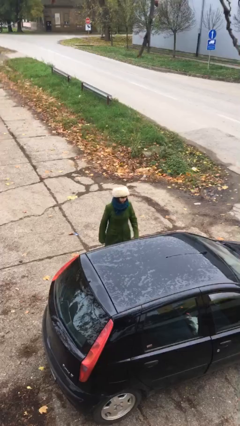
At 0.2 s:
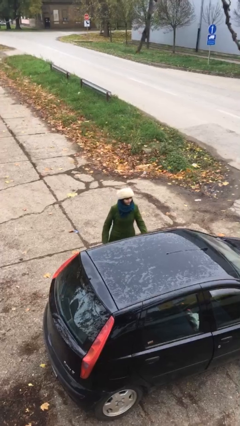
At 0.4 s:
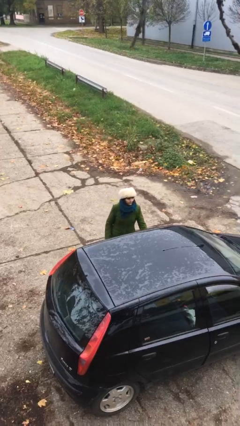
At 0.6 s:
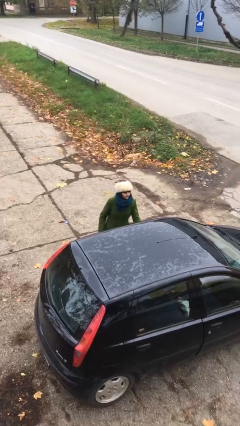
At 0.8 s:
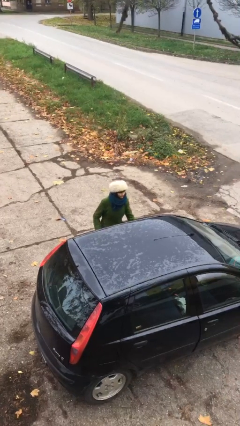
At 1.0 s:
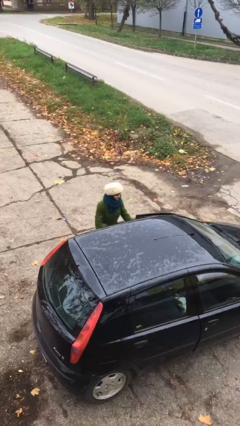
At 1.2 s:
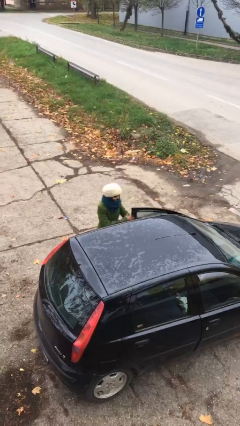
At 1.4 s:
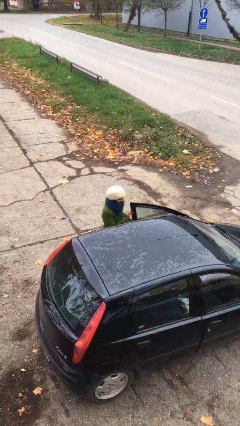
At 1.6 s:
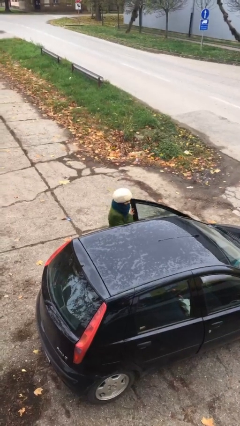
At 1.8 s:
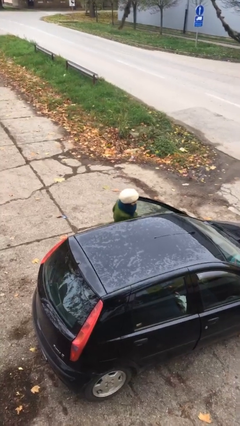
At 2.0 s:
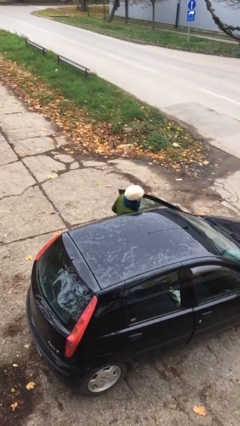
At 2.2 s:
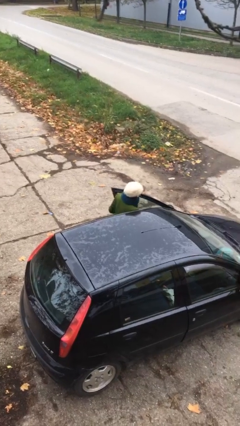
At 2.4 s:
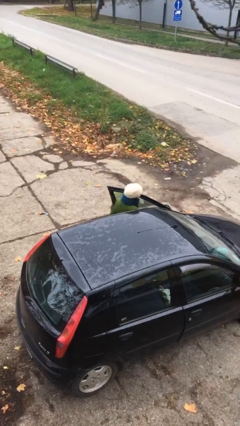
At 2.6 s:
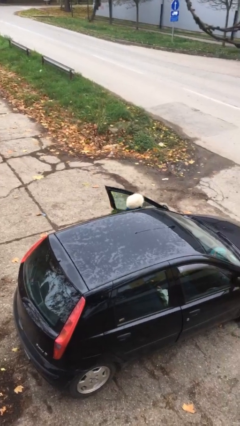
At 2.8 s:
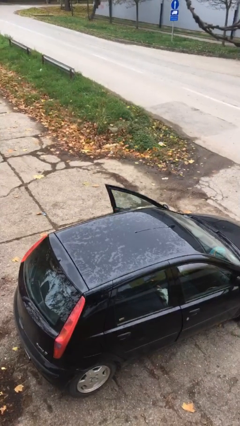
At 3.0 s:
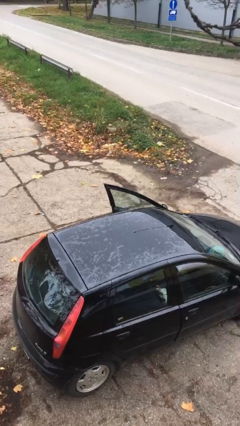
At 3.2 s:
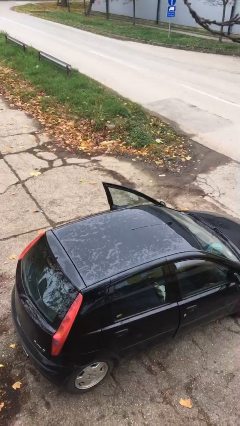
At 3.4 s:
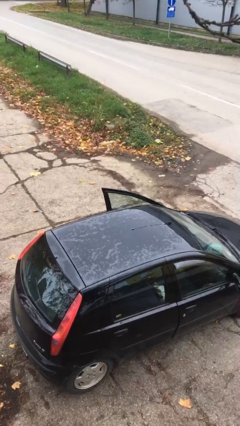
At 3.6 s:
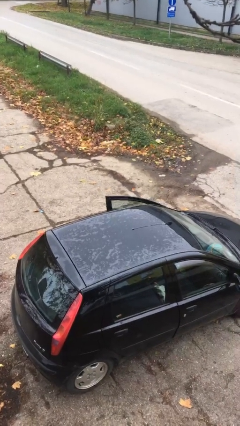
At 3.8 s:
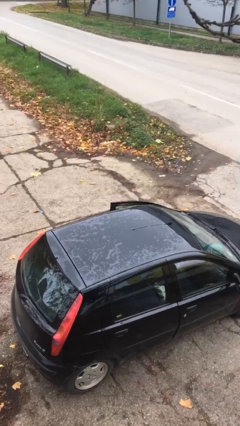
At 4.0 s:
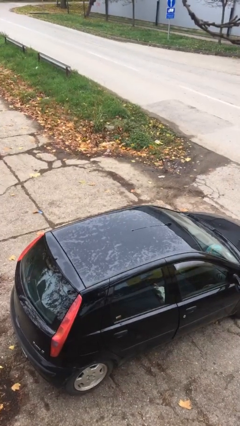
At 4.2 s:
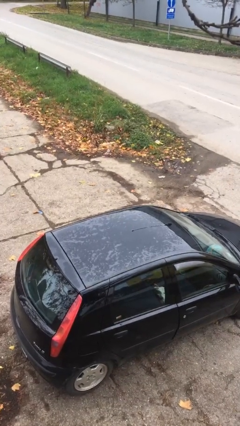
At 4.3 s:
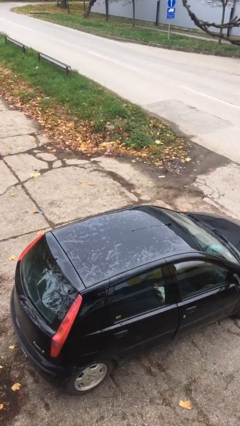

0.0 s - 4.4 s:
person enters car

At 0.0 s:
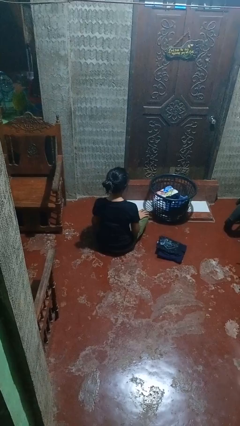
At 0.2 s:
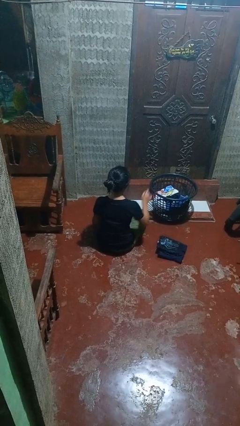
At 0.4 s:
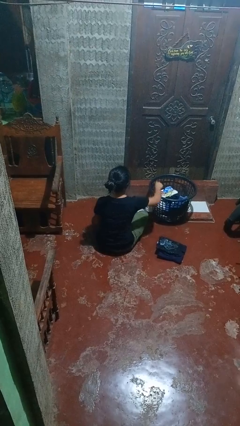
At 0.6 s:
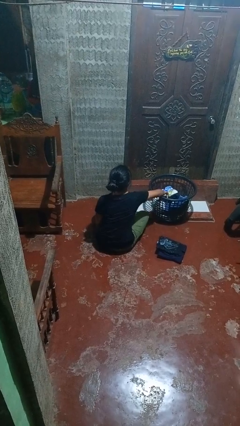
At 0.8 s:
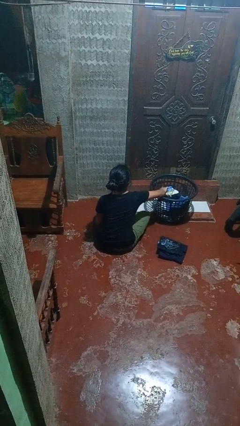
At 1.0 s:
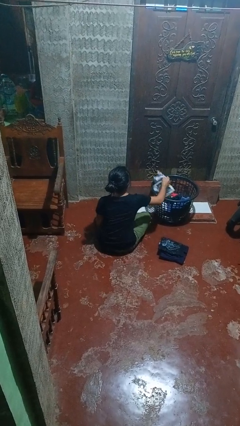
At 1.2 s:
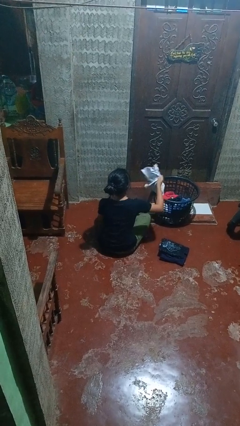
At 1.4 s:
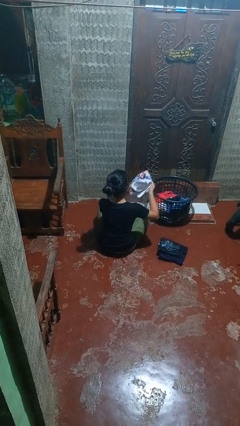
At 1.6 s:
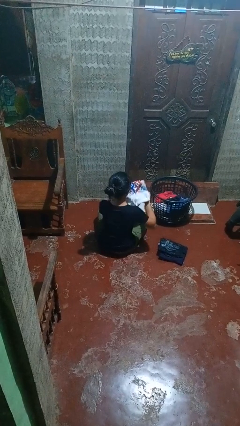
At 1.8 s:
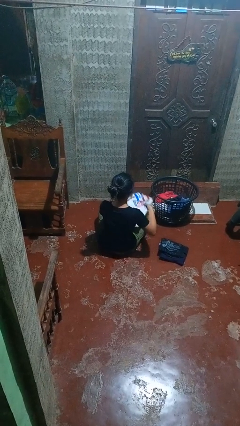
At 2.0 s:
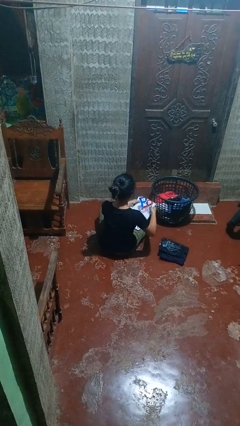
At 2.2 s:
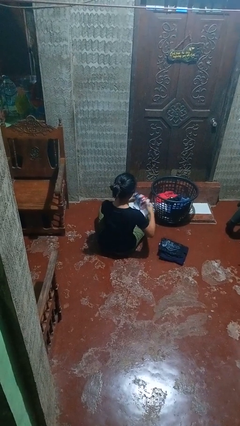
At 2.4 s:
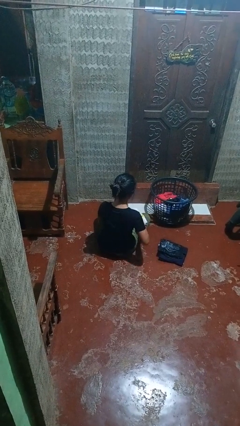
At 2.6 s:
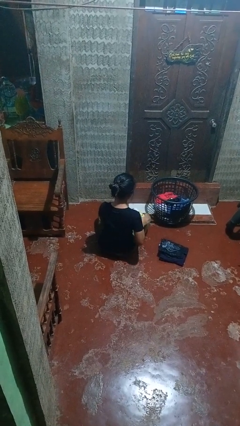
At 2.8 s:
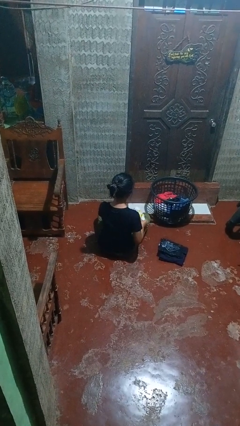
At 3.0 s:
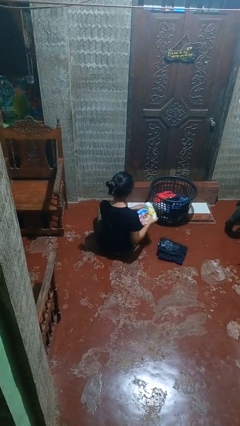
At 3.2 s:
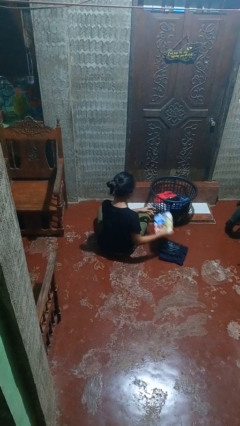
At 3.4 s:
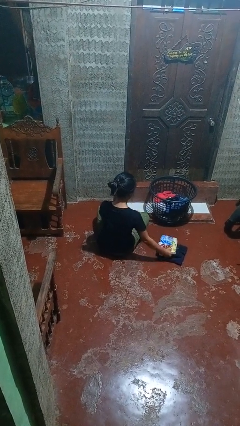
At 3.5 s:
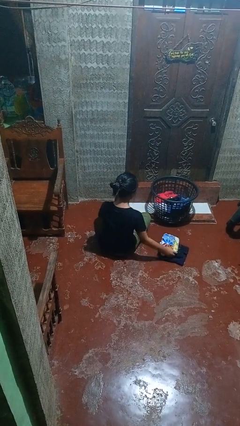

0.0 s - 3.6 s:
person folds shirt

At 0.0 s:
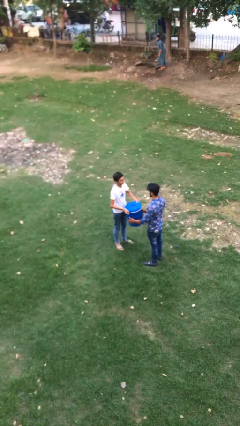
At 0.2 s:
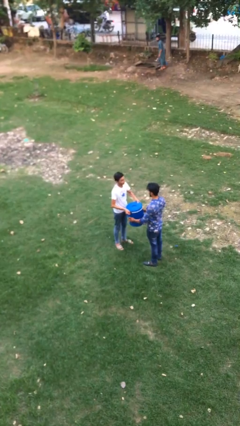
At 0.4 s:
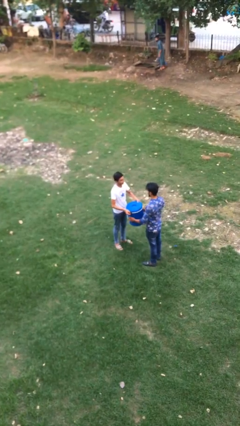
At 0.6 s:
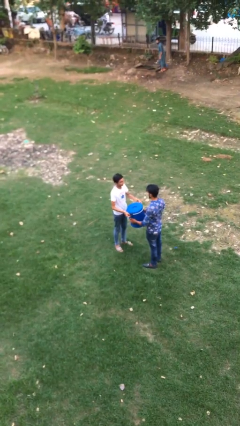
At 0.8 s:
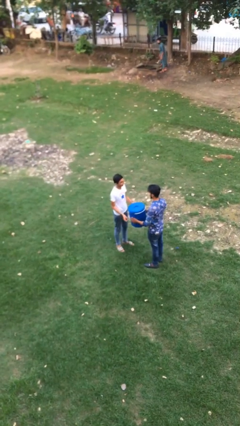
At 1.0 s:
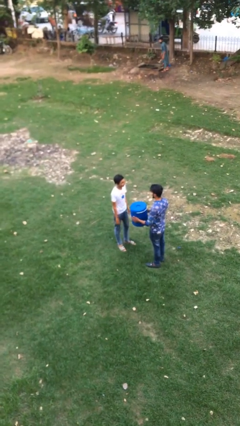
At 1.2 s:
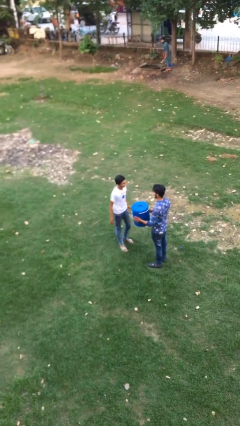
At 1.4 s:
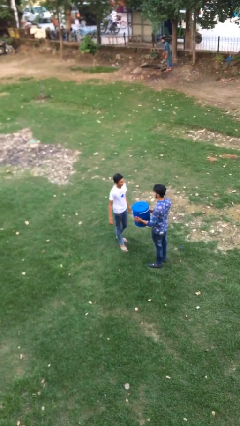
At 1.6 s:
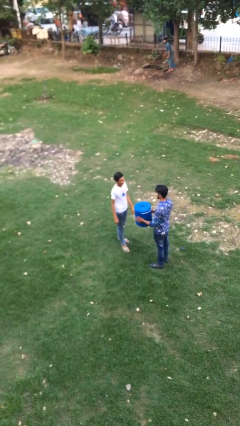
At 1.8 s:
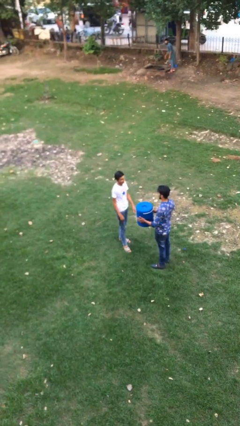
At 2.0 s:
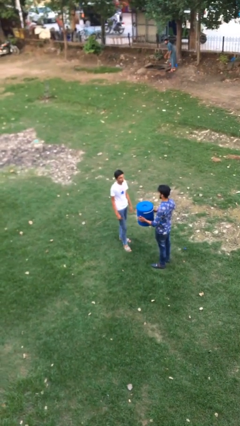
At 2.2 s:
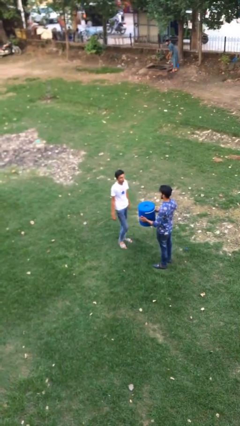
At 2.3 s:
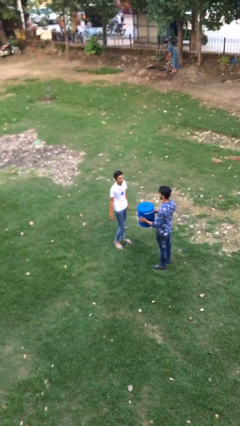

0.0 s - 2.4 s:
person transfers object to person

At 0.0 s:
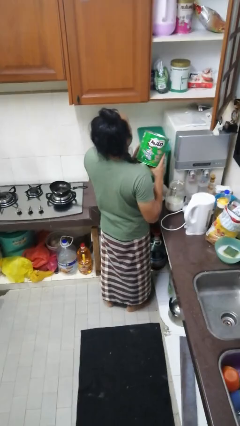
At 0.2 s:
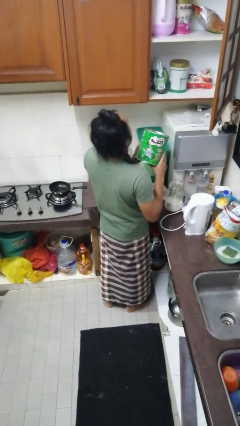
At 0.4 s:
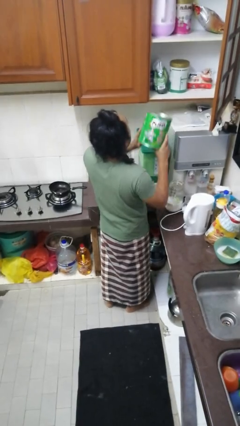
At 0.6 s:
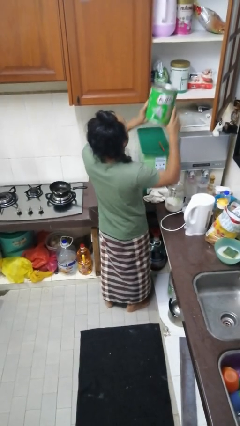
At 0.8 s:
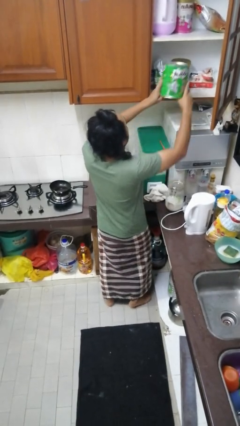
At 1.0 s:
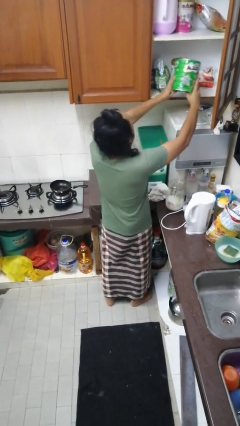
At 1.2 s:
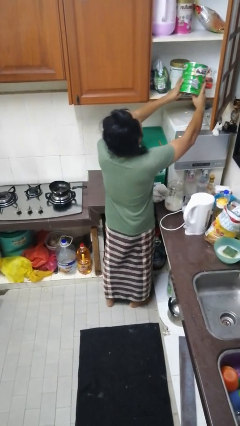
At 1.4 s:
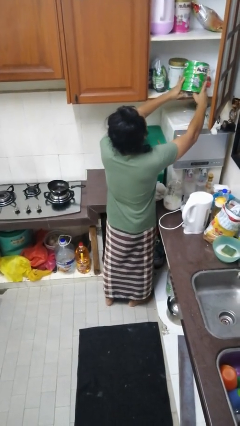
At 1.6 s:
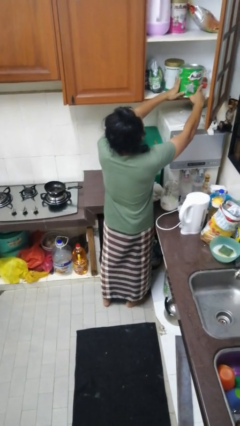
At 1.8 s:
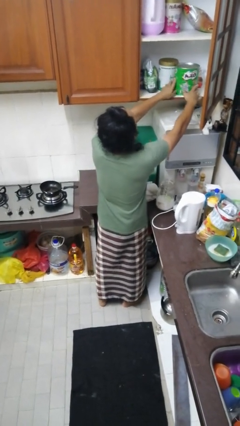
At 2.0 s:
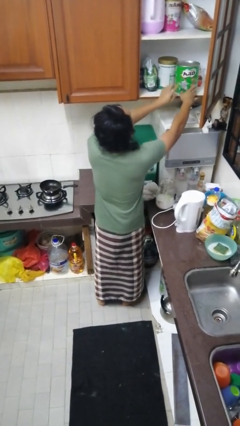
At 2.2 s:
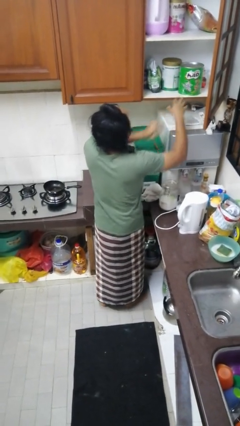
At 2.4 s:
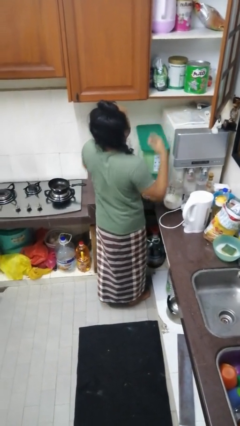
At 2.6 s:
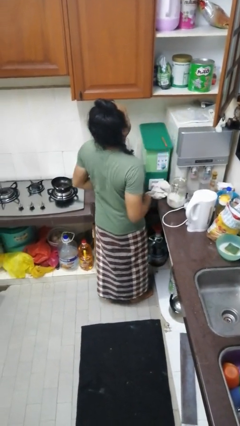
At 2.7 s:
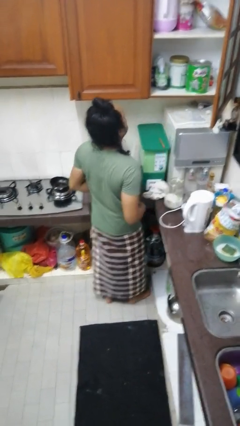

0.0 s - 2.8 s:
person puts object in cabinet

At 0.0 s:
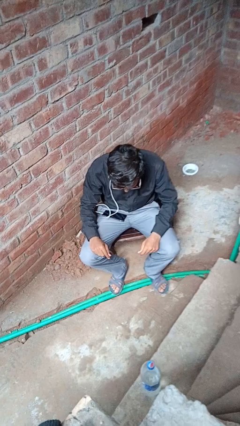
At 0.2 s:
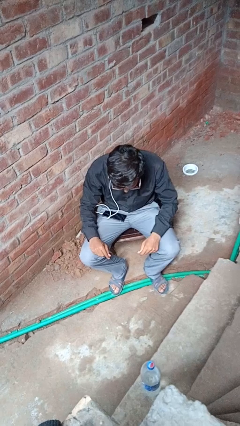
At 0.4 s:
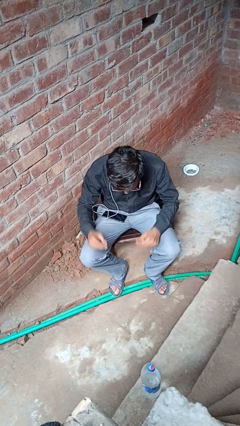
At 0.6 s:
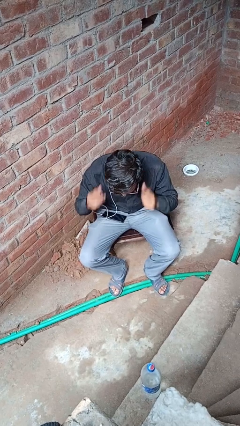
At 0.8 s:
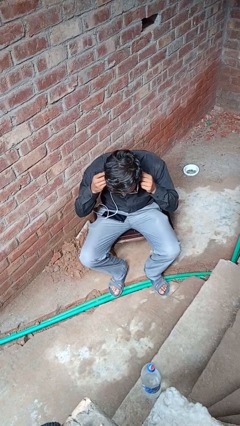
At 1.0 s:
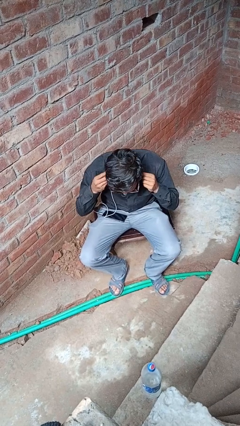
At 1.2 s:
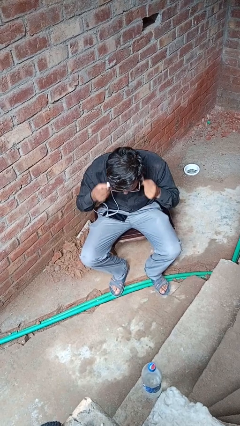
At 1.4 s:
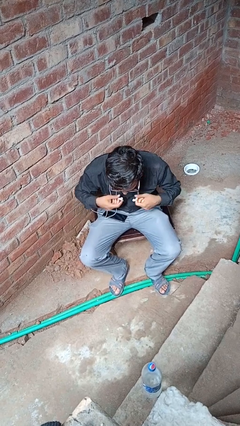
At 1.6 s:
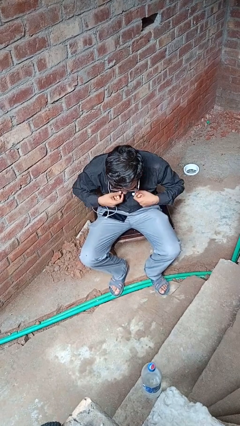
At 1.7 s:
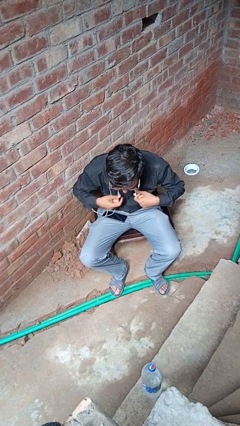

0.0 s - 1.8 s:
person takes off headphones

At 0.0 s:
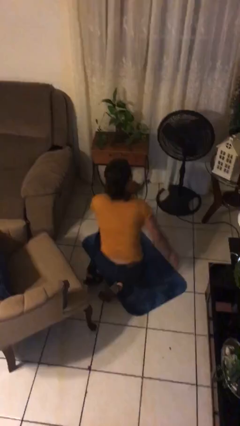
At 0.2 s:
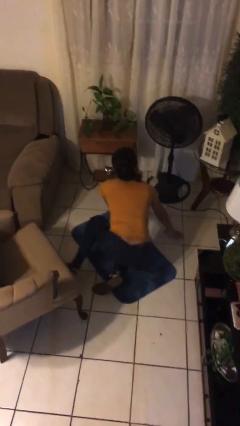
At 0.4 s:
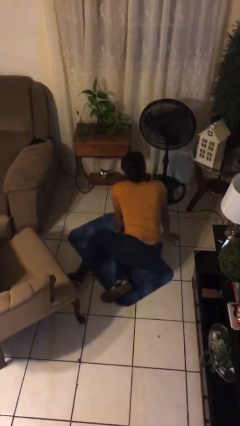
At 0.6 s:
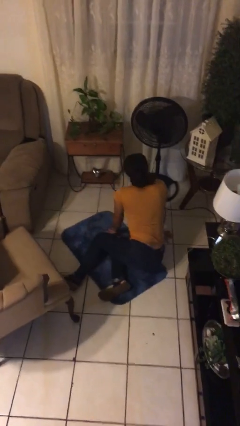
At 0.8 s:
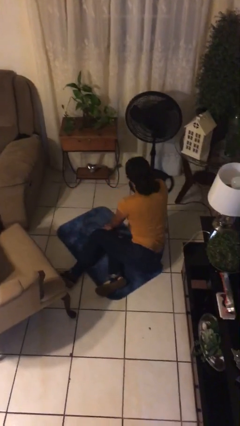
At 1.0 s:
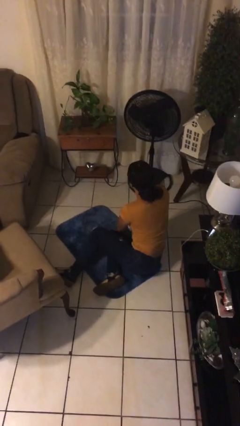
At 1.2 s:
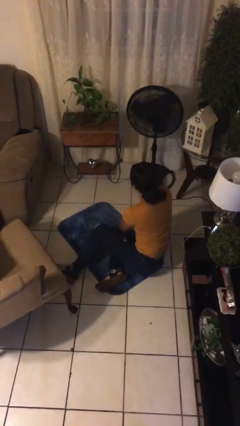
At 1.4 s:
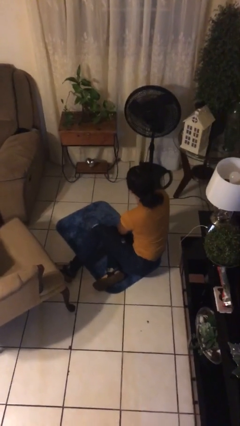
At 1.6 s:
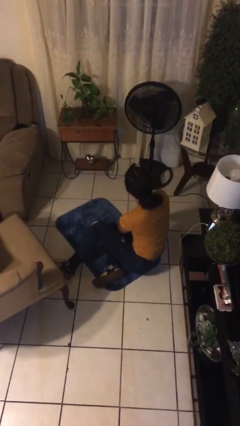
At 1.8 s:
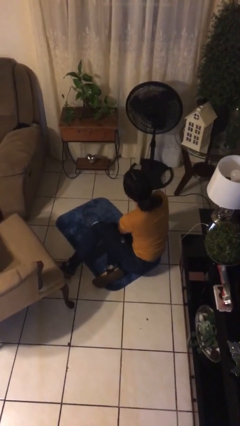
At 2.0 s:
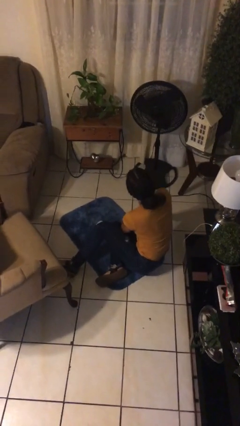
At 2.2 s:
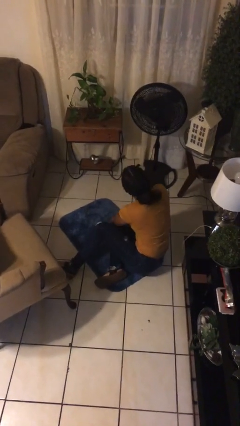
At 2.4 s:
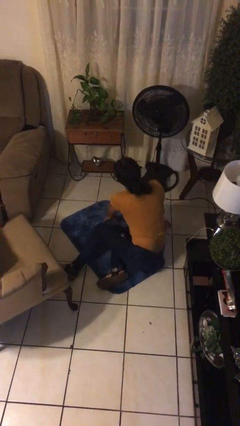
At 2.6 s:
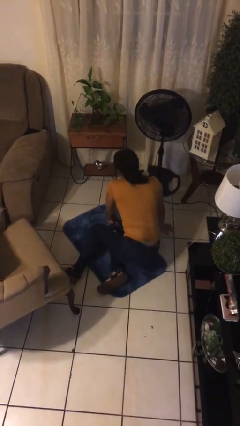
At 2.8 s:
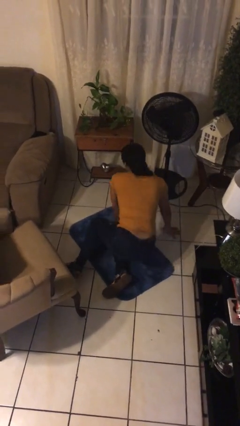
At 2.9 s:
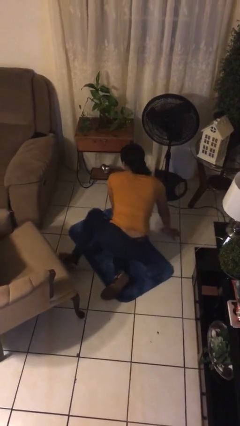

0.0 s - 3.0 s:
person falls from chair
